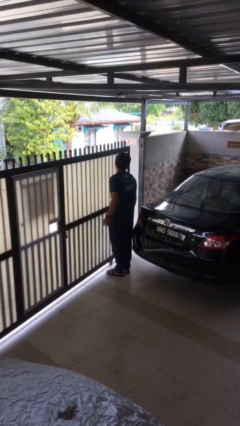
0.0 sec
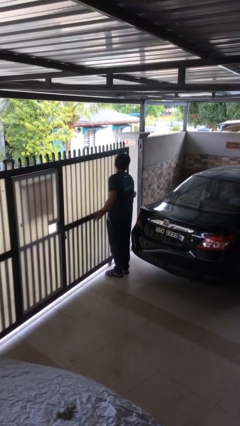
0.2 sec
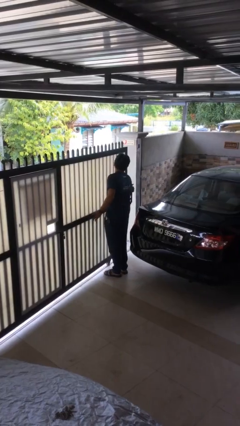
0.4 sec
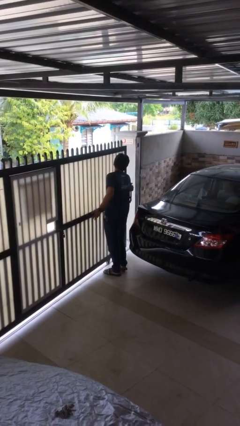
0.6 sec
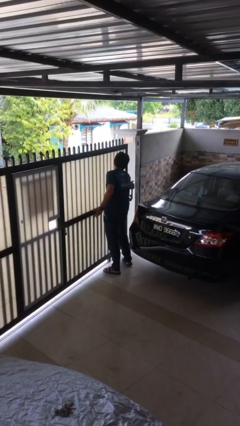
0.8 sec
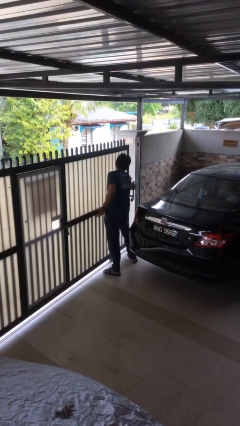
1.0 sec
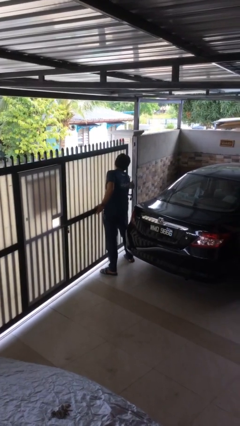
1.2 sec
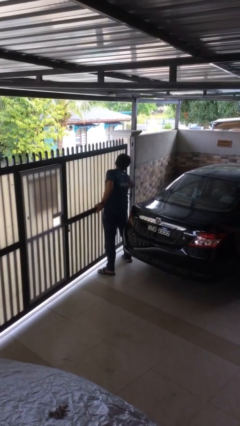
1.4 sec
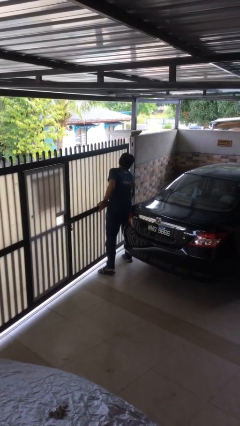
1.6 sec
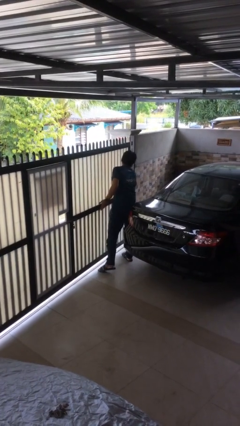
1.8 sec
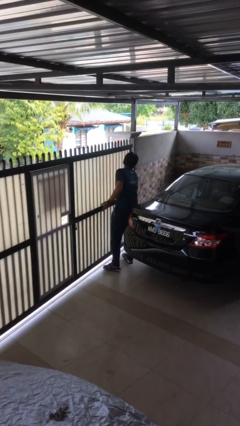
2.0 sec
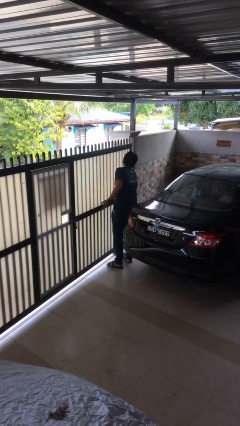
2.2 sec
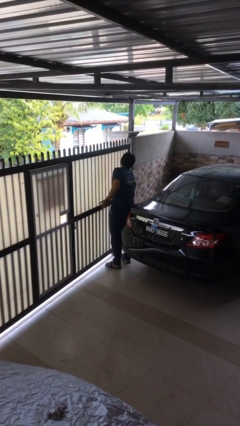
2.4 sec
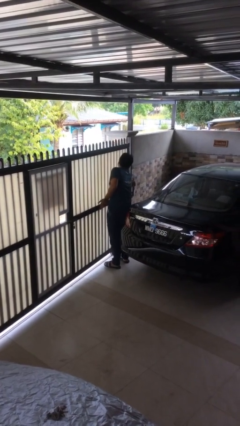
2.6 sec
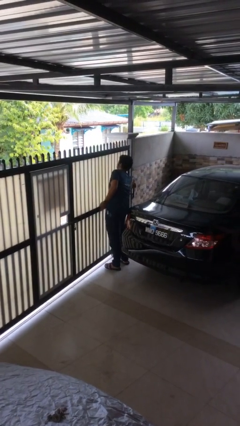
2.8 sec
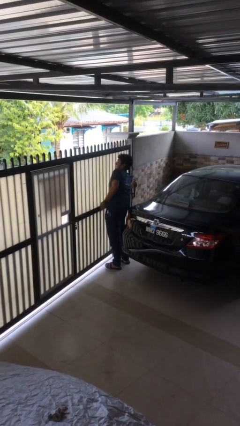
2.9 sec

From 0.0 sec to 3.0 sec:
person closes sliding door

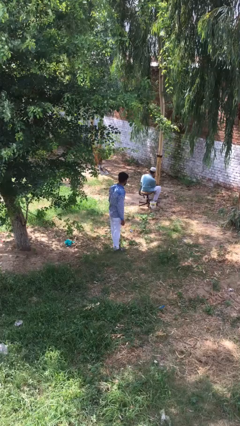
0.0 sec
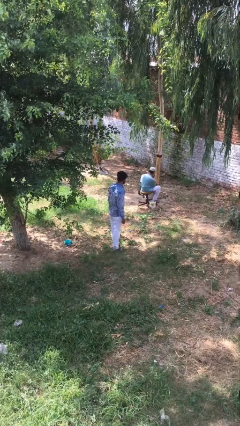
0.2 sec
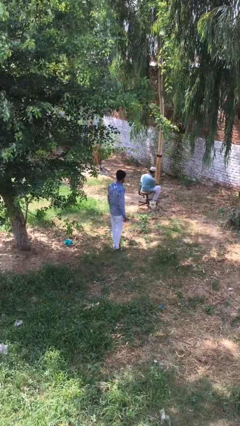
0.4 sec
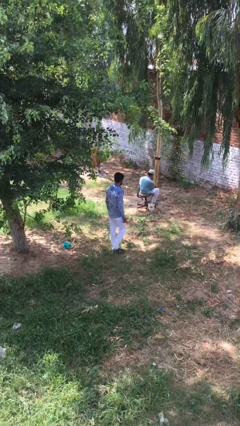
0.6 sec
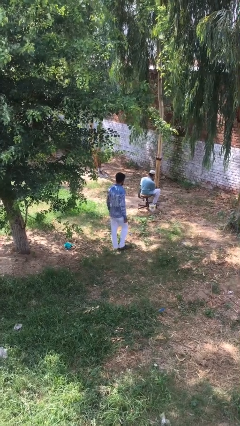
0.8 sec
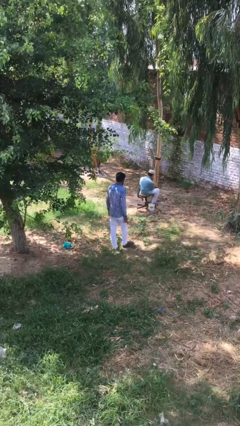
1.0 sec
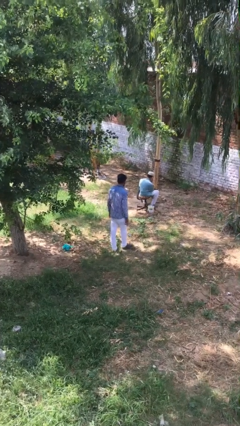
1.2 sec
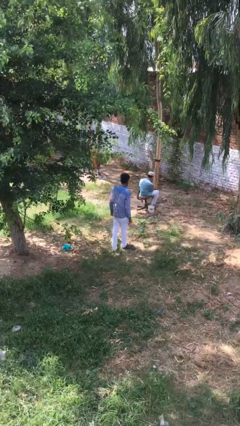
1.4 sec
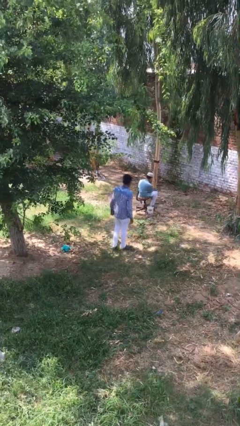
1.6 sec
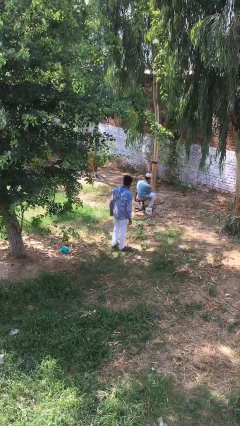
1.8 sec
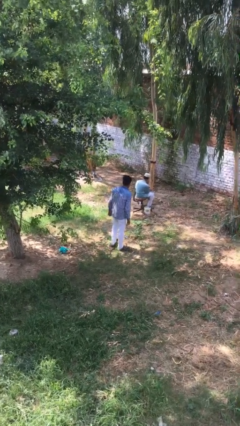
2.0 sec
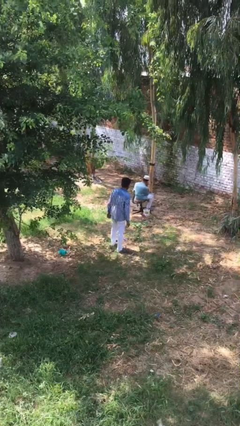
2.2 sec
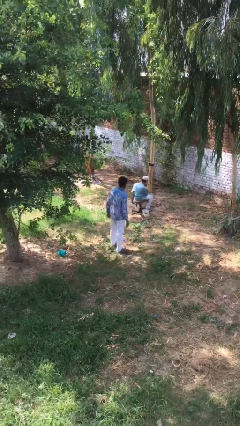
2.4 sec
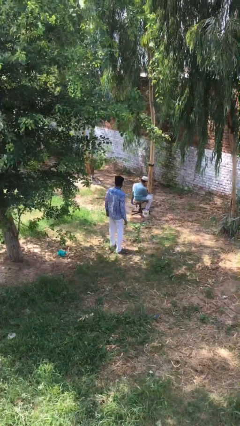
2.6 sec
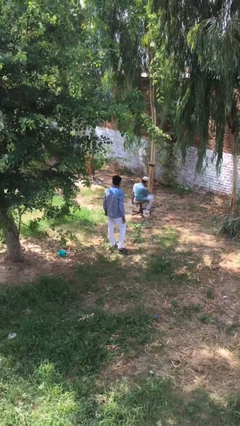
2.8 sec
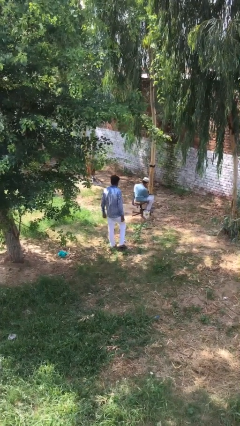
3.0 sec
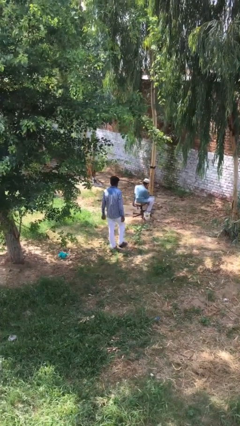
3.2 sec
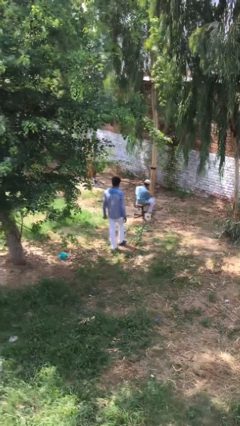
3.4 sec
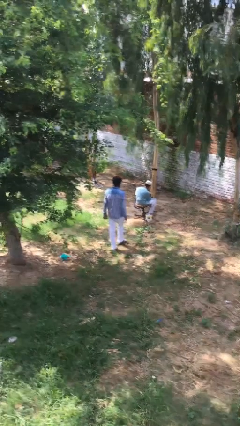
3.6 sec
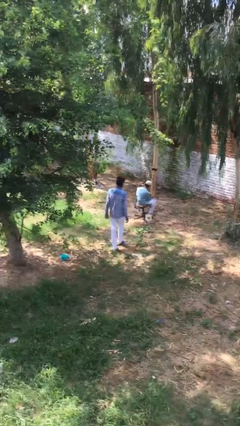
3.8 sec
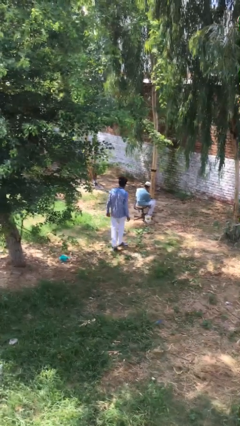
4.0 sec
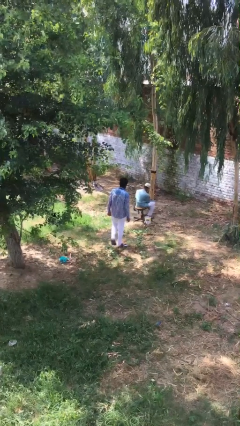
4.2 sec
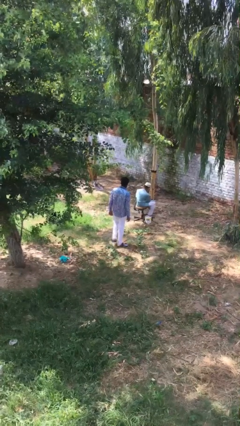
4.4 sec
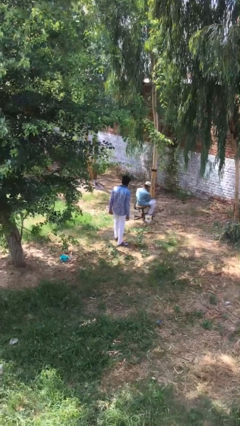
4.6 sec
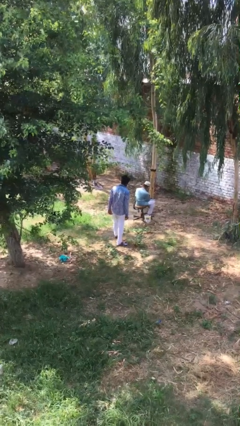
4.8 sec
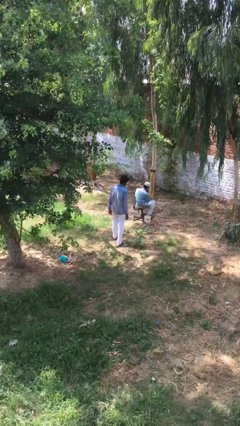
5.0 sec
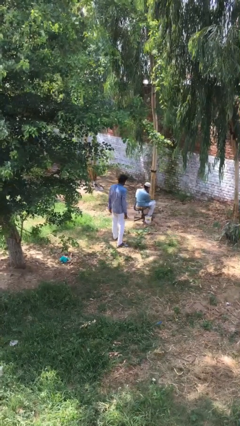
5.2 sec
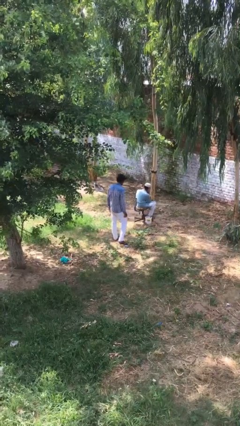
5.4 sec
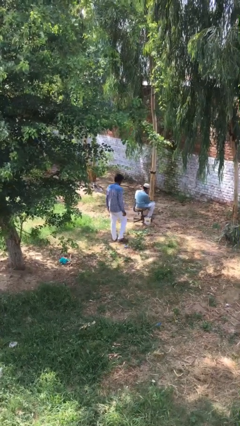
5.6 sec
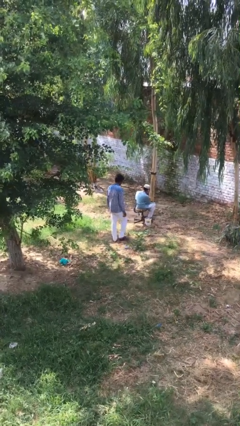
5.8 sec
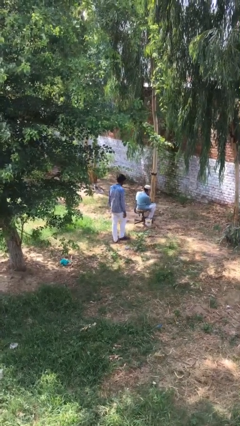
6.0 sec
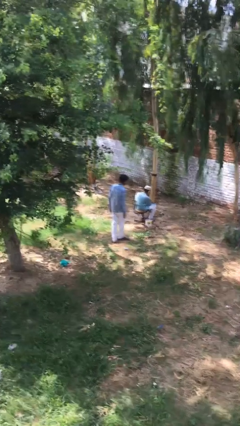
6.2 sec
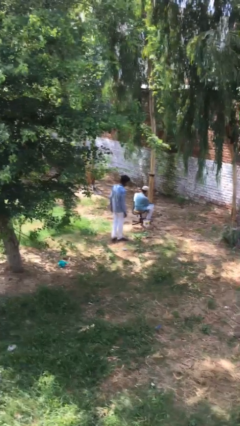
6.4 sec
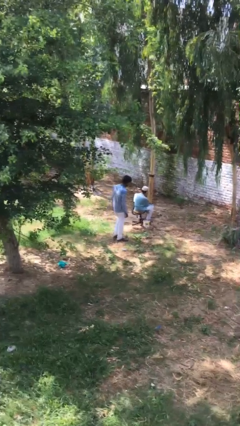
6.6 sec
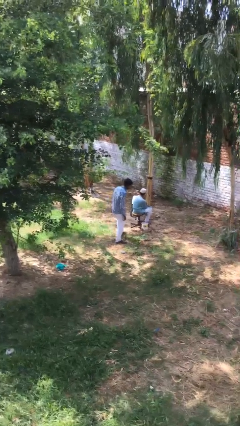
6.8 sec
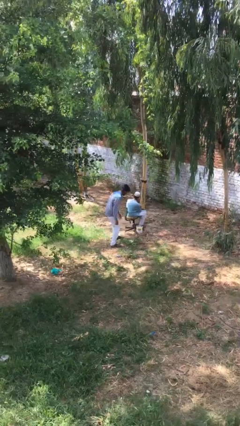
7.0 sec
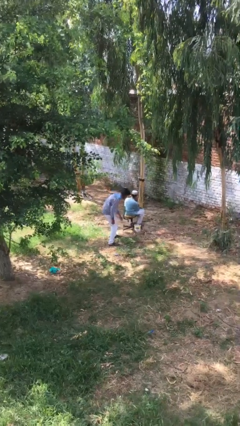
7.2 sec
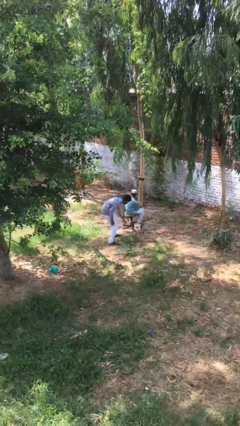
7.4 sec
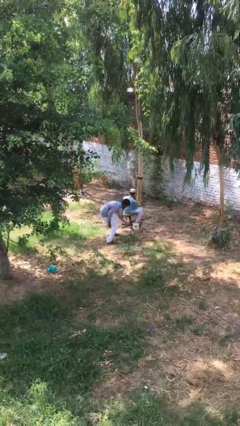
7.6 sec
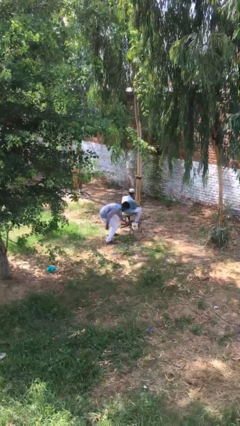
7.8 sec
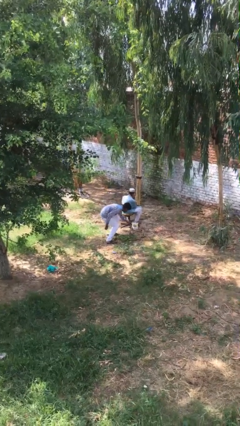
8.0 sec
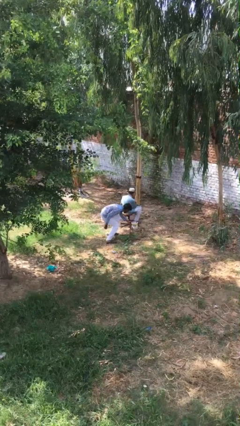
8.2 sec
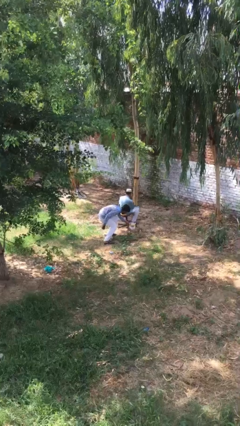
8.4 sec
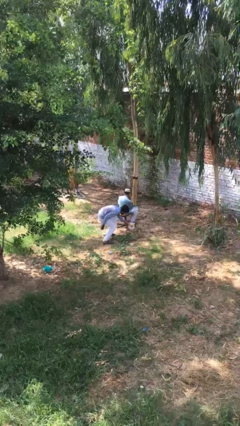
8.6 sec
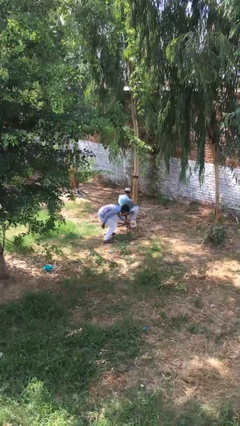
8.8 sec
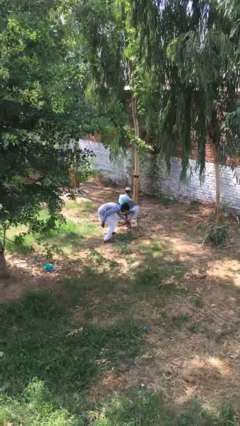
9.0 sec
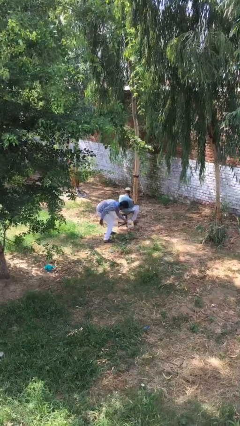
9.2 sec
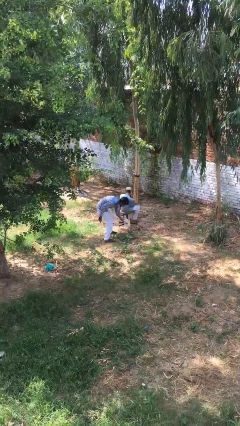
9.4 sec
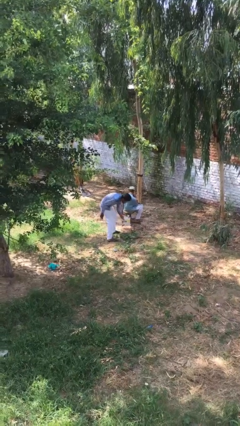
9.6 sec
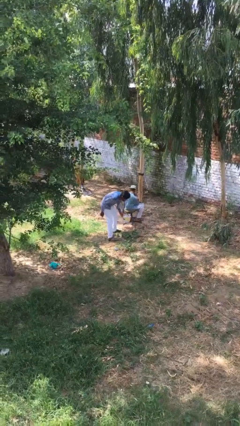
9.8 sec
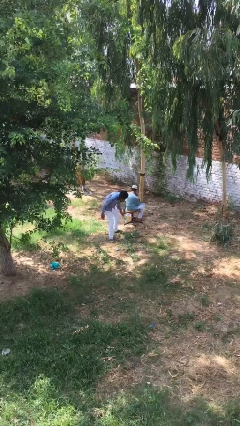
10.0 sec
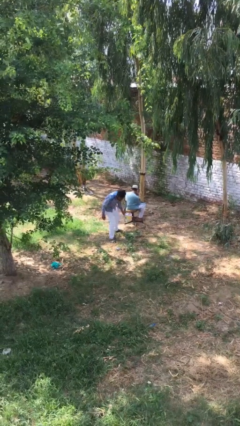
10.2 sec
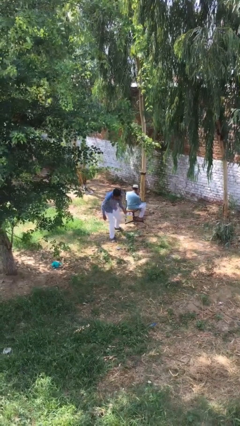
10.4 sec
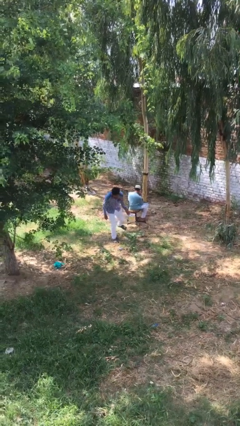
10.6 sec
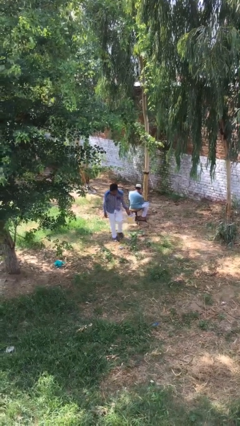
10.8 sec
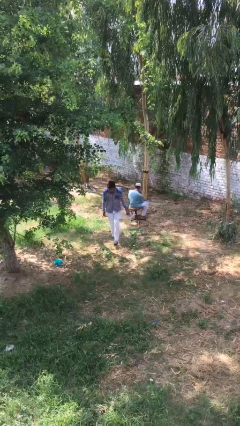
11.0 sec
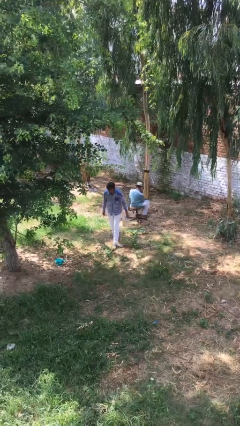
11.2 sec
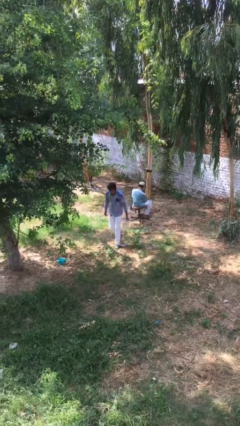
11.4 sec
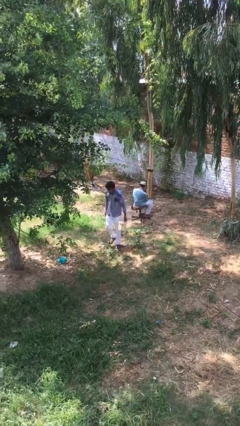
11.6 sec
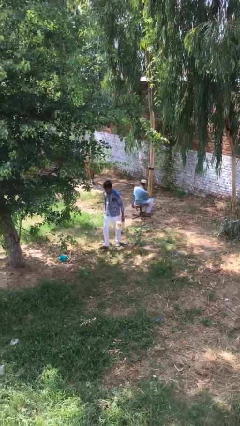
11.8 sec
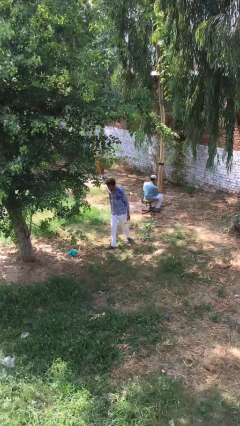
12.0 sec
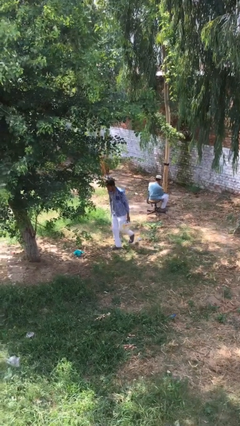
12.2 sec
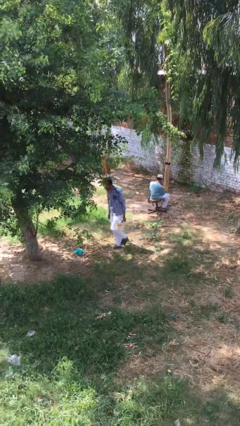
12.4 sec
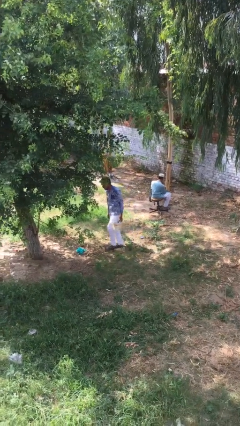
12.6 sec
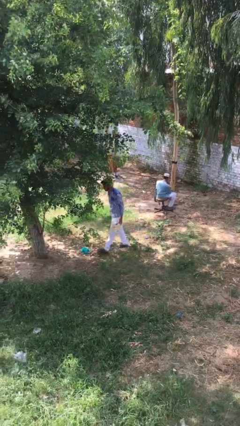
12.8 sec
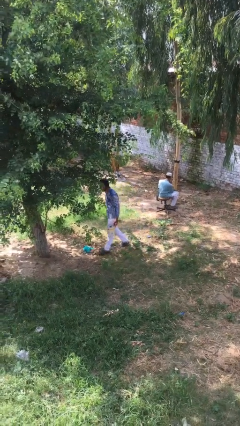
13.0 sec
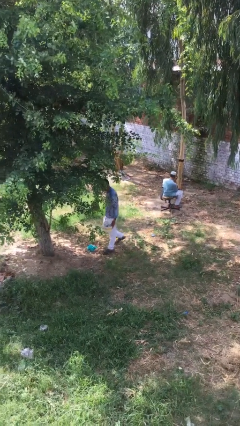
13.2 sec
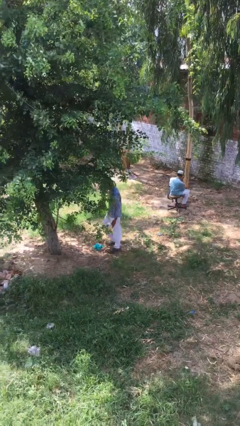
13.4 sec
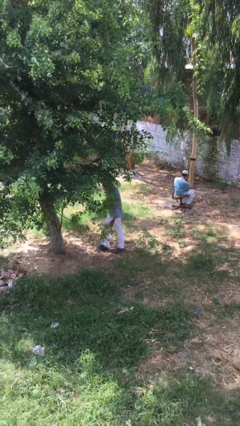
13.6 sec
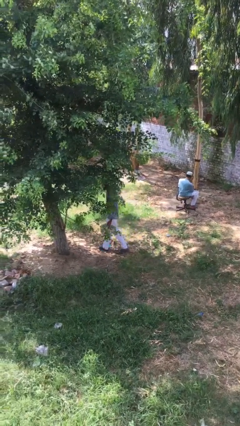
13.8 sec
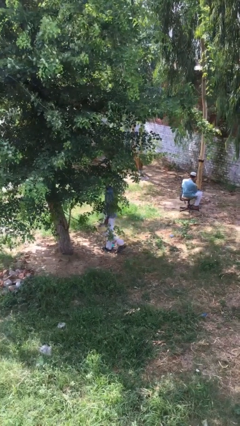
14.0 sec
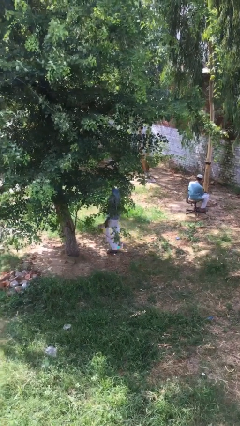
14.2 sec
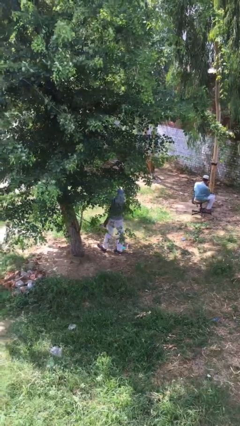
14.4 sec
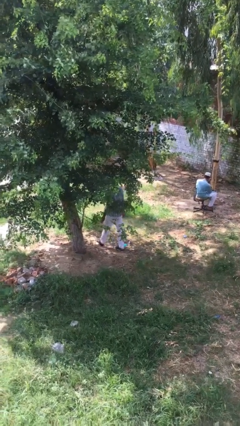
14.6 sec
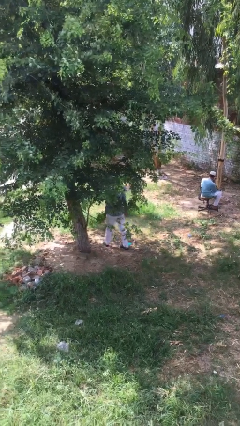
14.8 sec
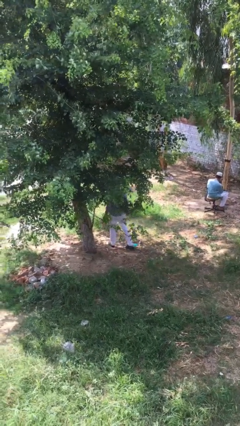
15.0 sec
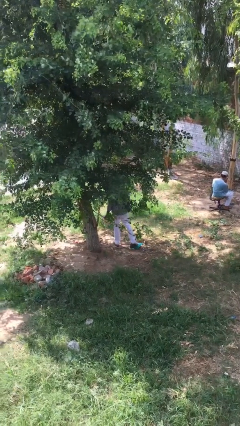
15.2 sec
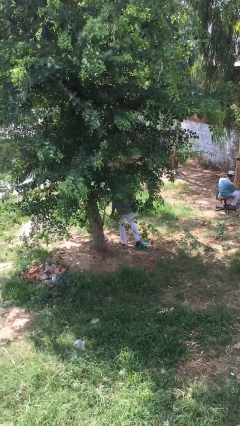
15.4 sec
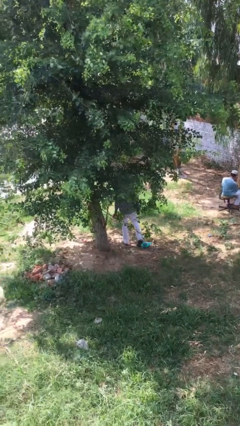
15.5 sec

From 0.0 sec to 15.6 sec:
person steals object from person
